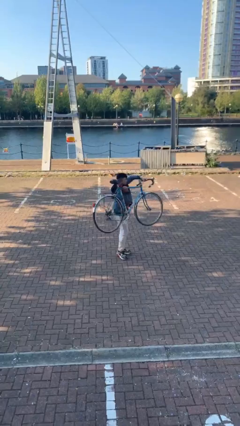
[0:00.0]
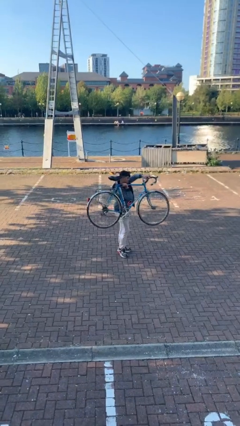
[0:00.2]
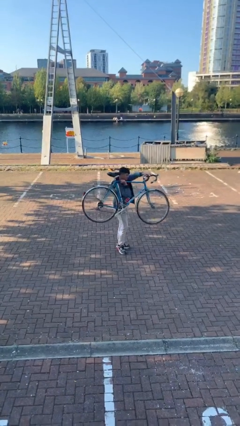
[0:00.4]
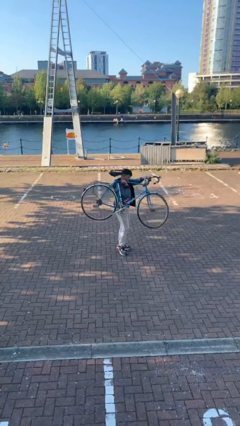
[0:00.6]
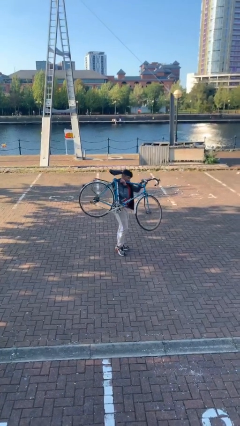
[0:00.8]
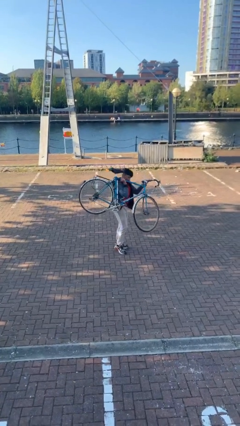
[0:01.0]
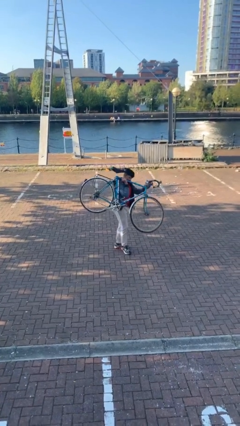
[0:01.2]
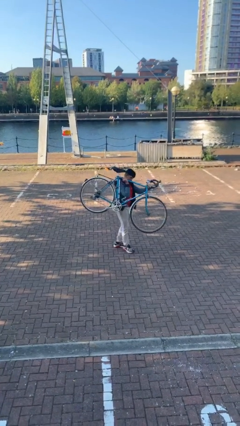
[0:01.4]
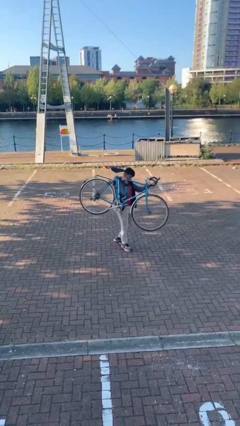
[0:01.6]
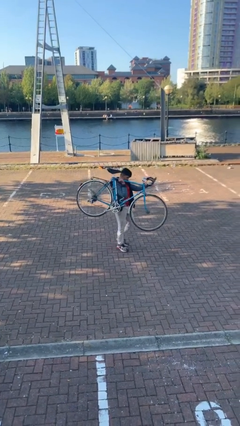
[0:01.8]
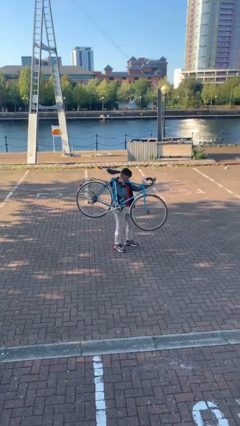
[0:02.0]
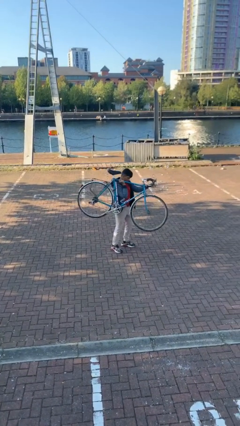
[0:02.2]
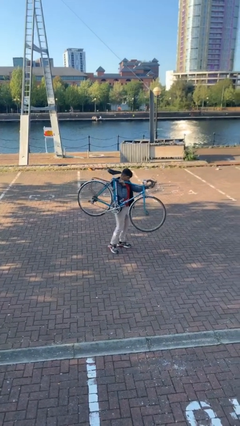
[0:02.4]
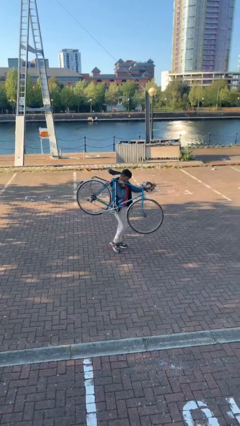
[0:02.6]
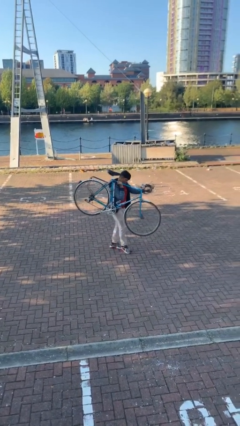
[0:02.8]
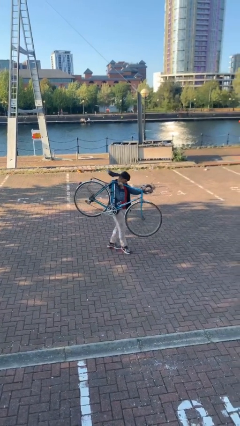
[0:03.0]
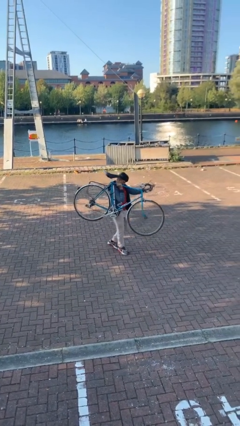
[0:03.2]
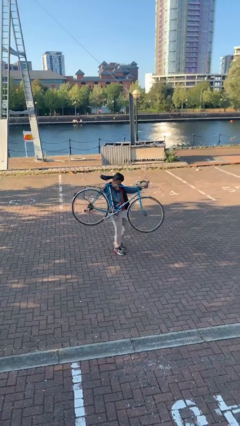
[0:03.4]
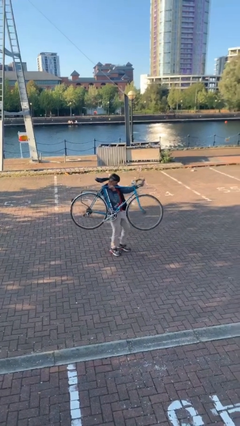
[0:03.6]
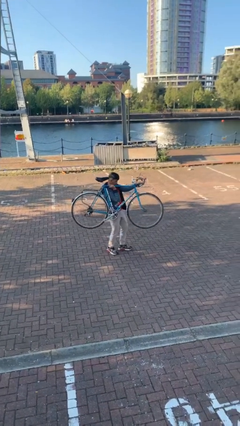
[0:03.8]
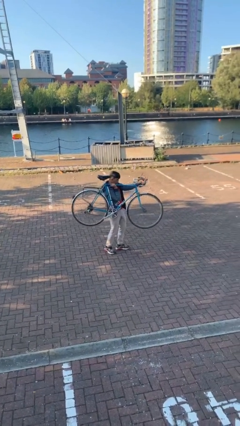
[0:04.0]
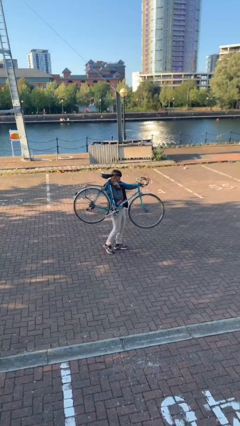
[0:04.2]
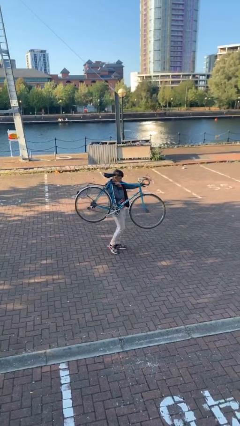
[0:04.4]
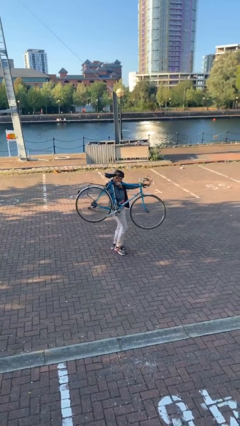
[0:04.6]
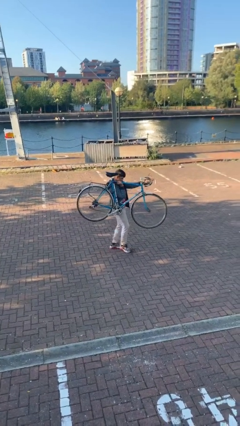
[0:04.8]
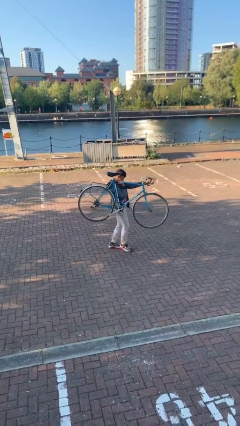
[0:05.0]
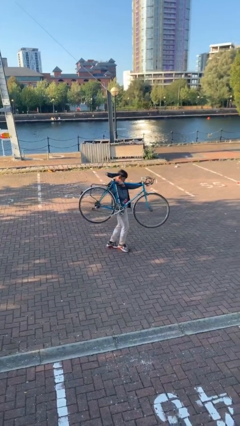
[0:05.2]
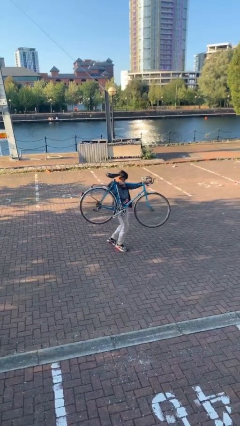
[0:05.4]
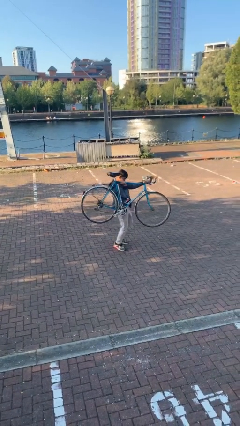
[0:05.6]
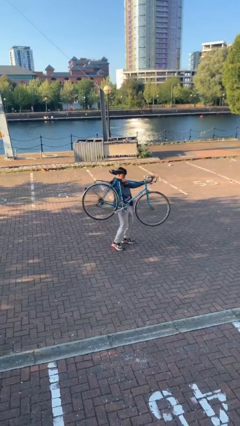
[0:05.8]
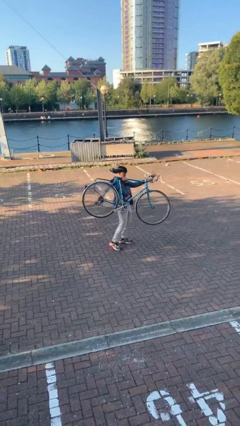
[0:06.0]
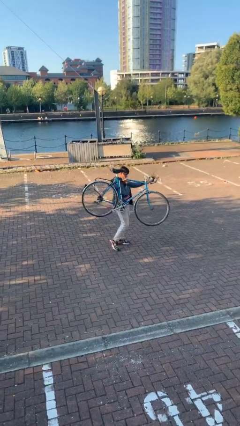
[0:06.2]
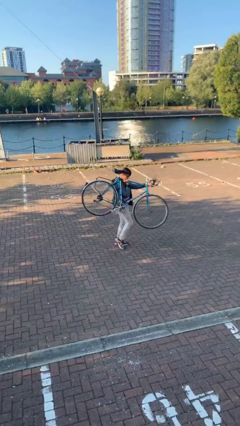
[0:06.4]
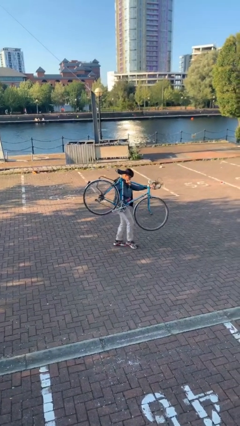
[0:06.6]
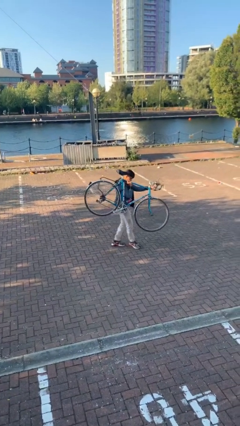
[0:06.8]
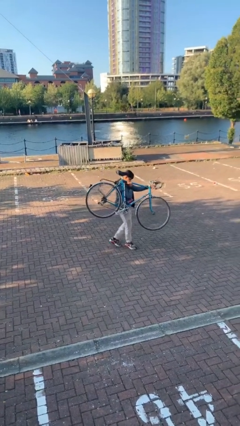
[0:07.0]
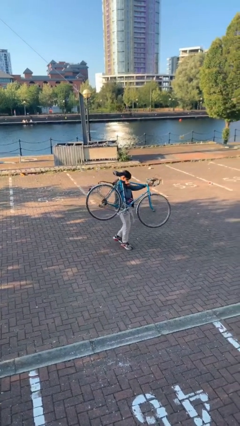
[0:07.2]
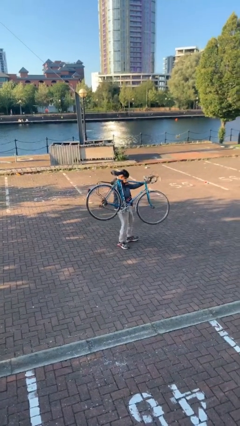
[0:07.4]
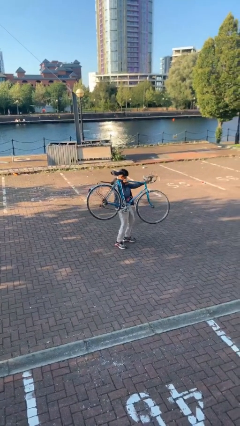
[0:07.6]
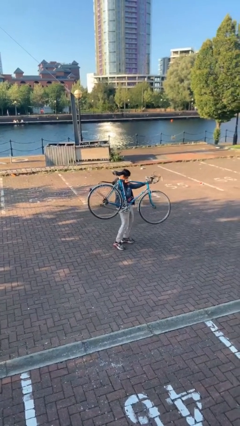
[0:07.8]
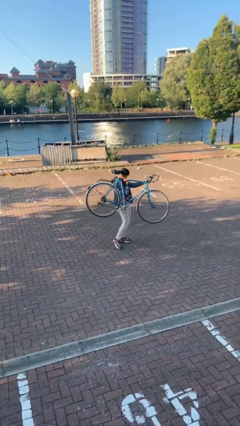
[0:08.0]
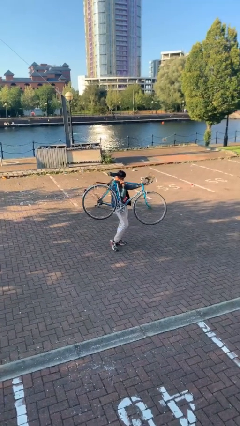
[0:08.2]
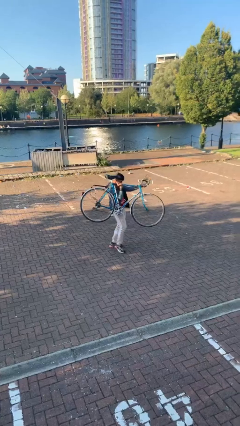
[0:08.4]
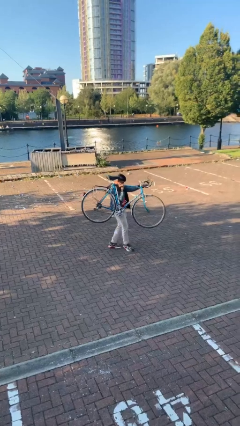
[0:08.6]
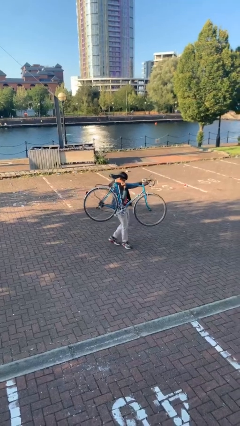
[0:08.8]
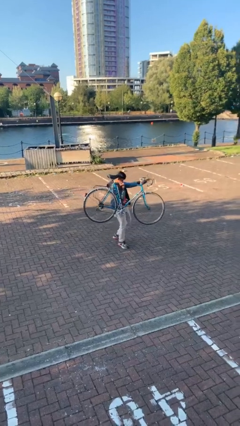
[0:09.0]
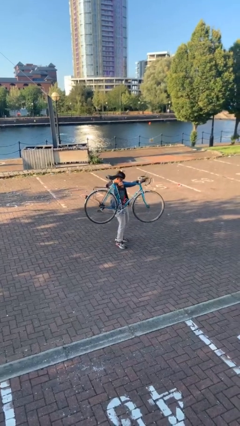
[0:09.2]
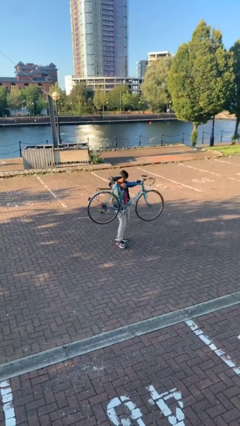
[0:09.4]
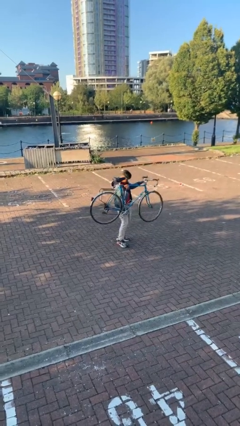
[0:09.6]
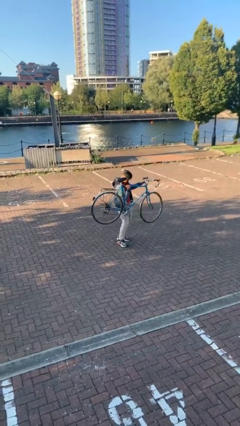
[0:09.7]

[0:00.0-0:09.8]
person carries heavy object

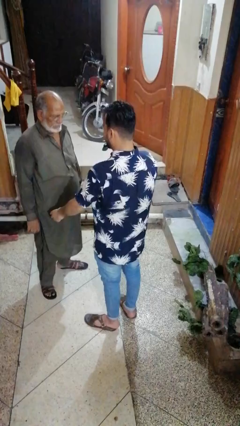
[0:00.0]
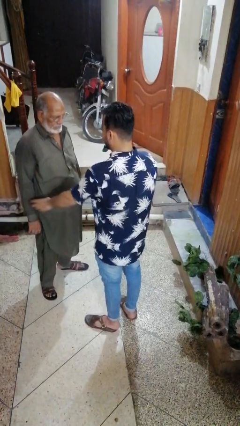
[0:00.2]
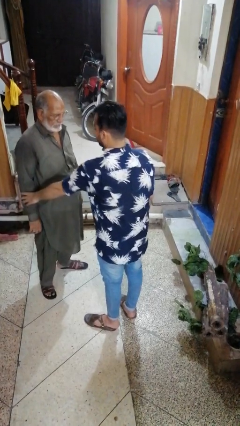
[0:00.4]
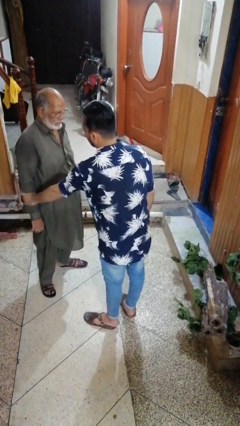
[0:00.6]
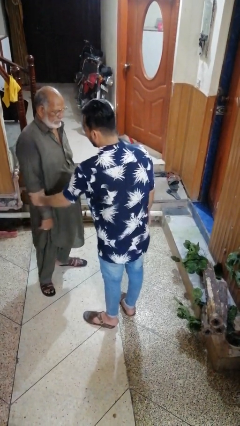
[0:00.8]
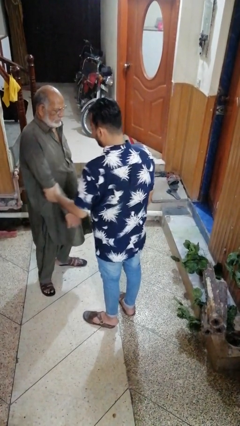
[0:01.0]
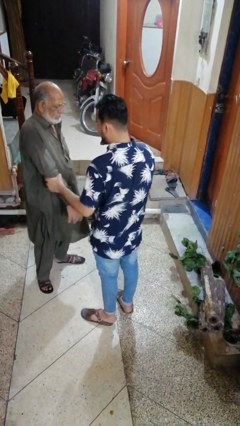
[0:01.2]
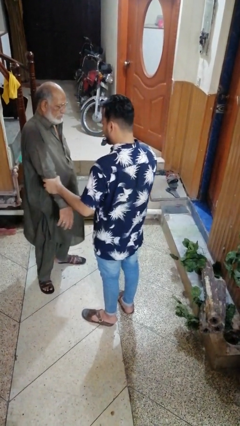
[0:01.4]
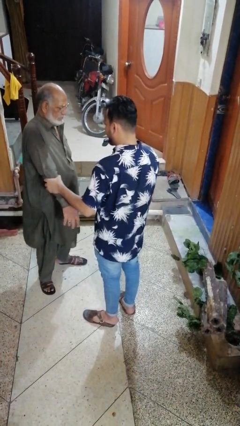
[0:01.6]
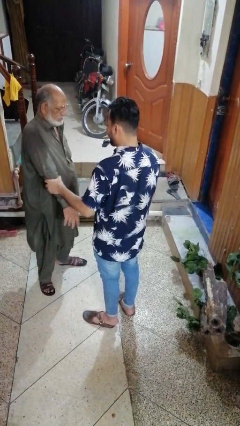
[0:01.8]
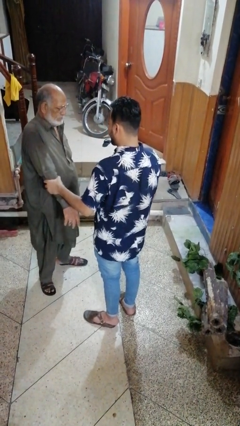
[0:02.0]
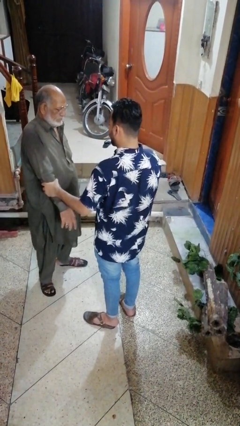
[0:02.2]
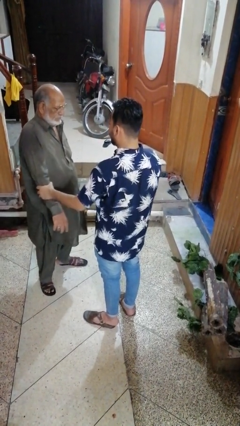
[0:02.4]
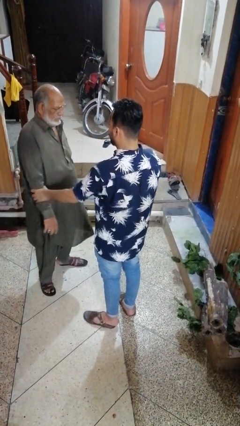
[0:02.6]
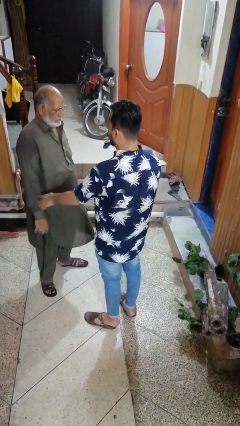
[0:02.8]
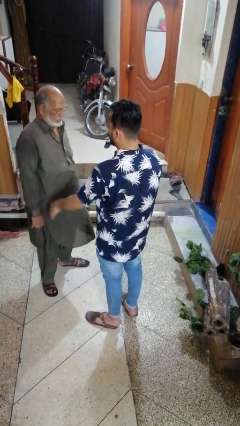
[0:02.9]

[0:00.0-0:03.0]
person grabs person by forearm

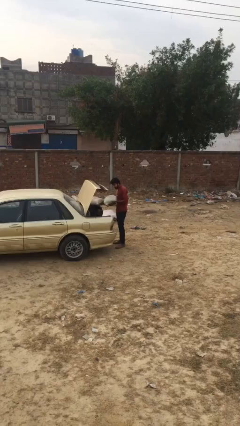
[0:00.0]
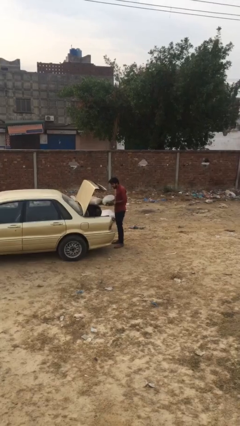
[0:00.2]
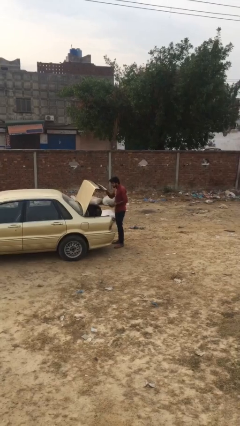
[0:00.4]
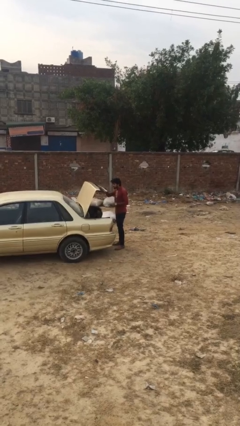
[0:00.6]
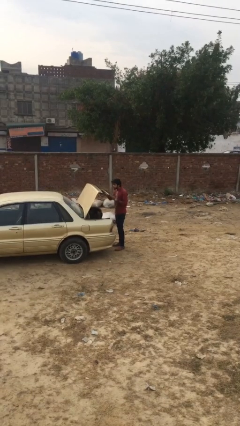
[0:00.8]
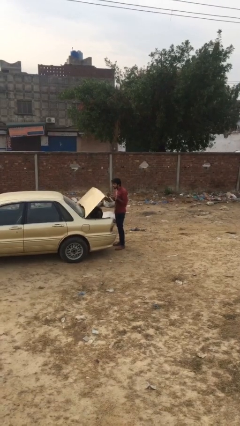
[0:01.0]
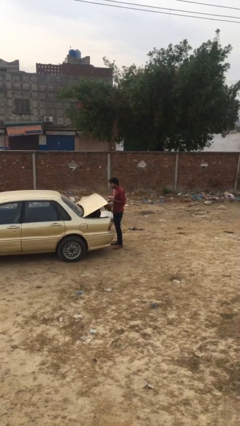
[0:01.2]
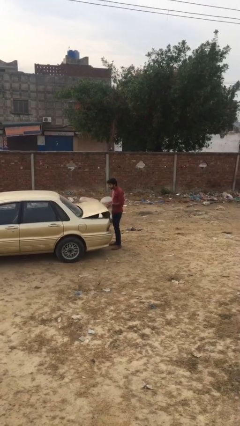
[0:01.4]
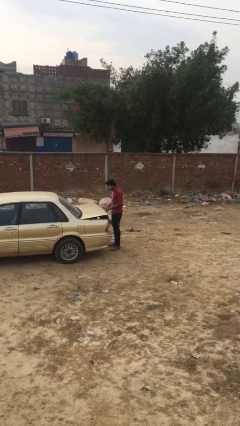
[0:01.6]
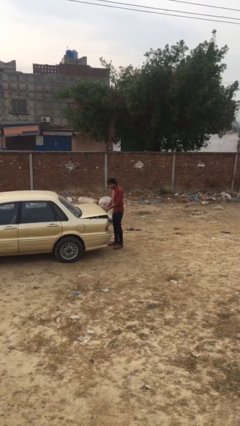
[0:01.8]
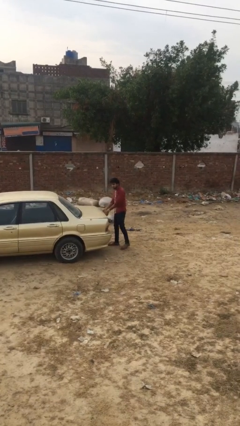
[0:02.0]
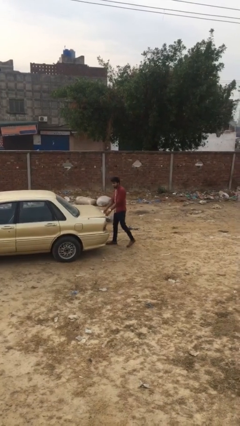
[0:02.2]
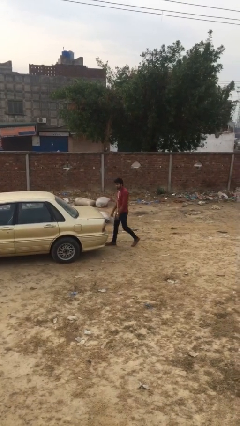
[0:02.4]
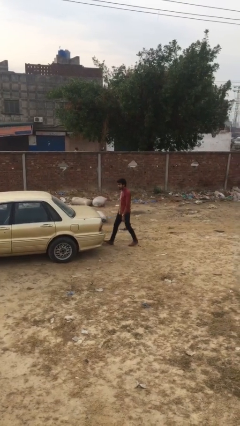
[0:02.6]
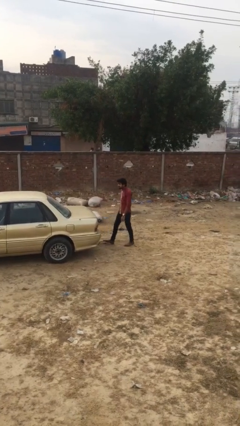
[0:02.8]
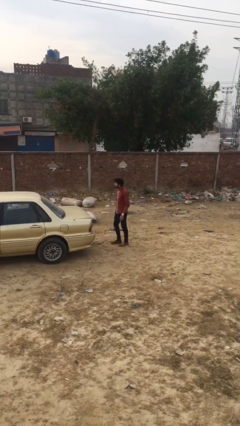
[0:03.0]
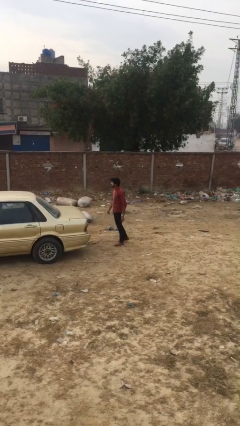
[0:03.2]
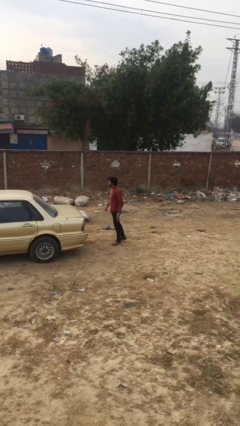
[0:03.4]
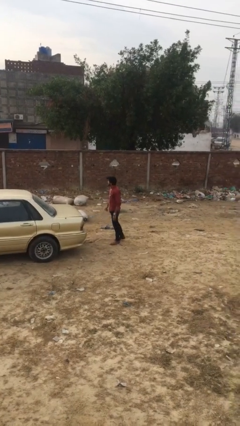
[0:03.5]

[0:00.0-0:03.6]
person closes car trunk

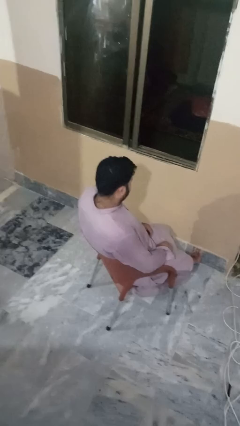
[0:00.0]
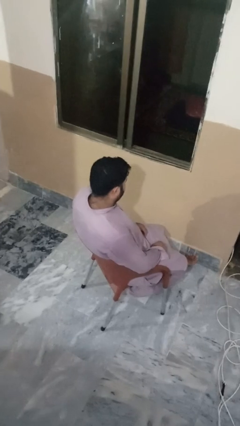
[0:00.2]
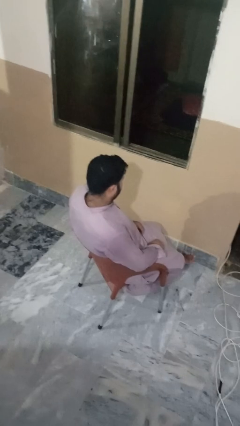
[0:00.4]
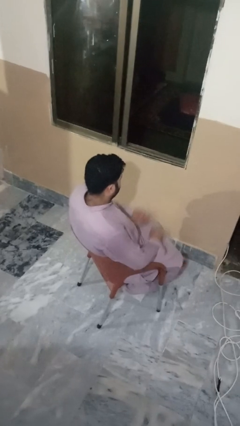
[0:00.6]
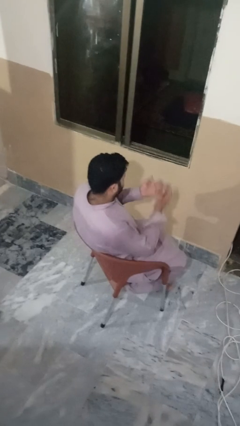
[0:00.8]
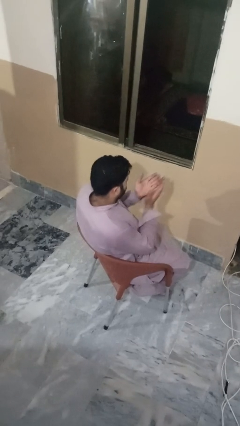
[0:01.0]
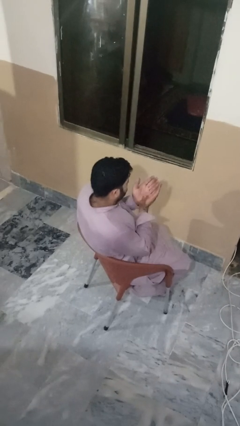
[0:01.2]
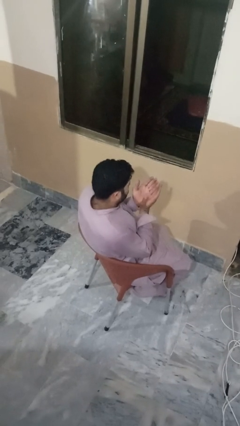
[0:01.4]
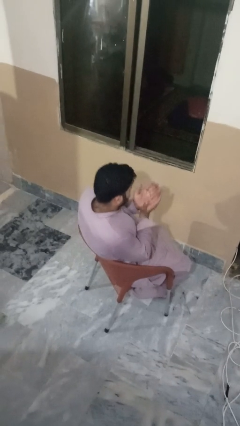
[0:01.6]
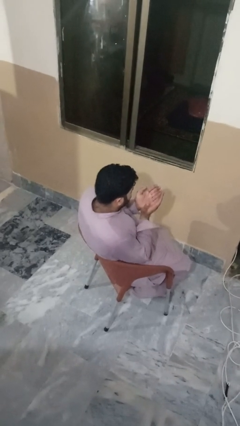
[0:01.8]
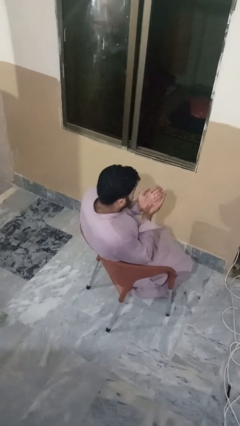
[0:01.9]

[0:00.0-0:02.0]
person prays
